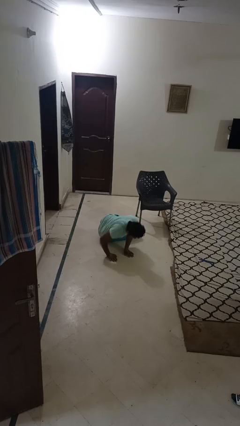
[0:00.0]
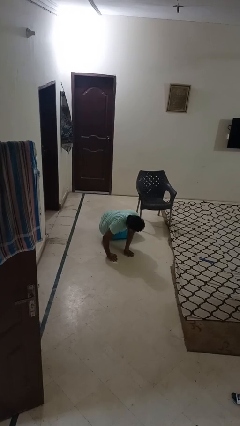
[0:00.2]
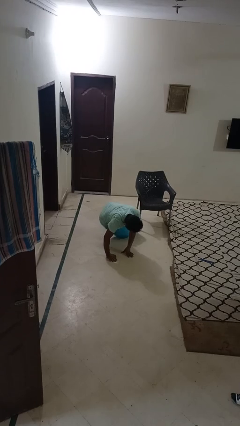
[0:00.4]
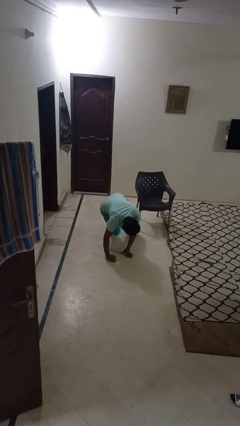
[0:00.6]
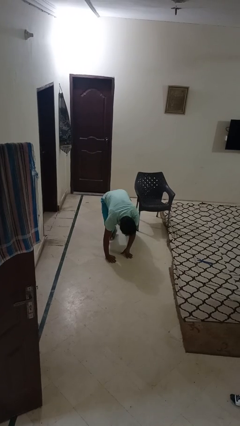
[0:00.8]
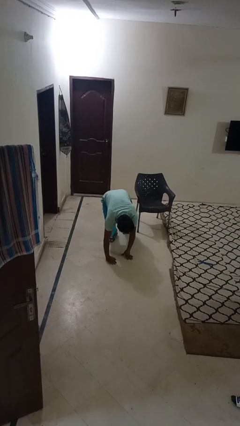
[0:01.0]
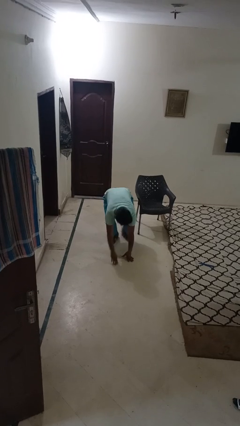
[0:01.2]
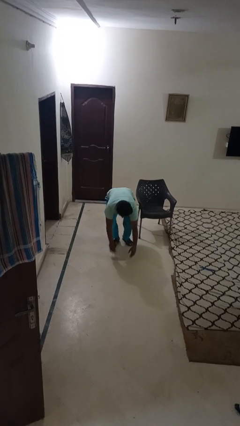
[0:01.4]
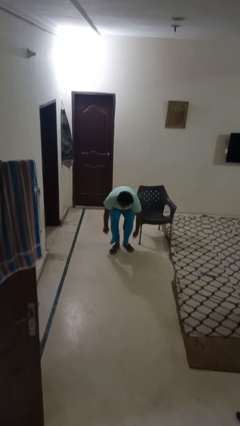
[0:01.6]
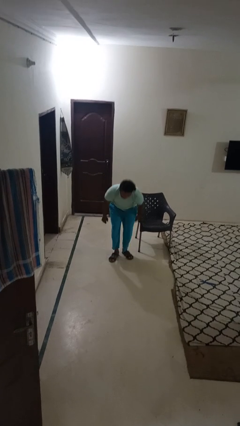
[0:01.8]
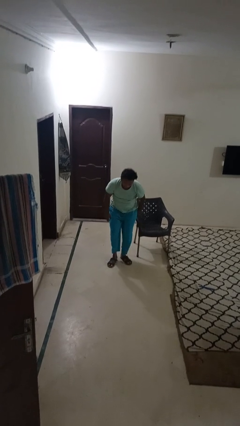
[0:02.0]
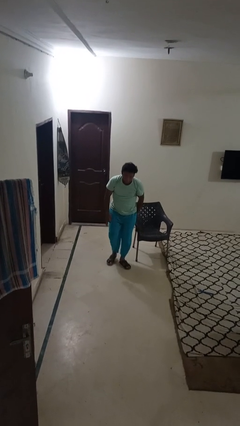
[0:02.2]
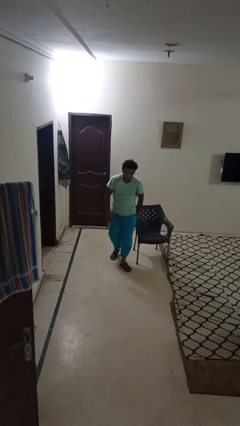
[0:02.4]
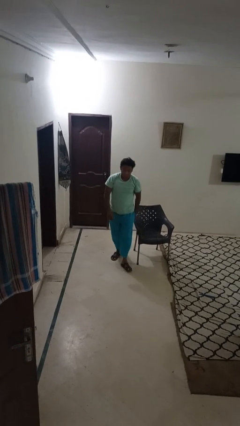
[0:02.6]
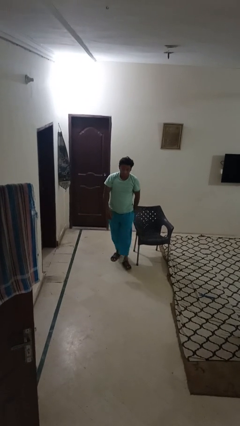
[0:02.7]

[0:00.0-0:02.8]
person stands up from floor

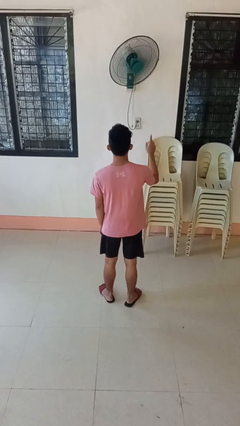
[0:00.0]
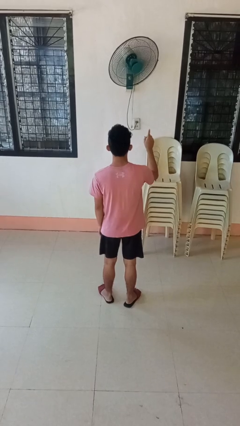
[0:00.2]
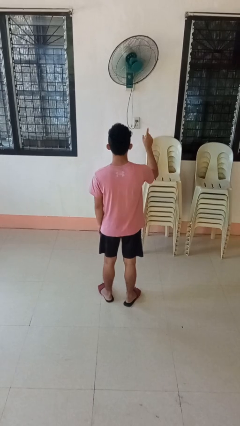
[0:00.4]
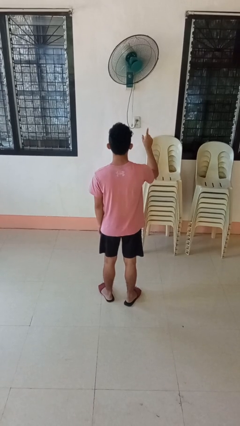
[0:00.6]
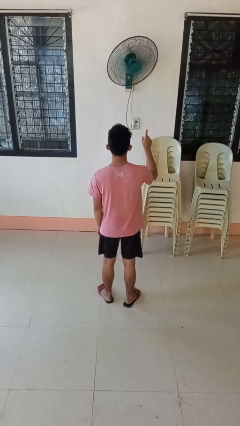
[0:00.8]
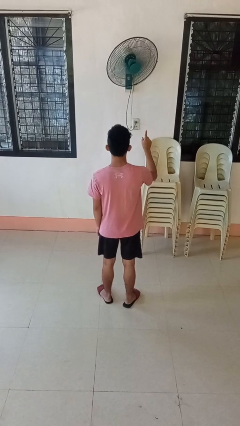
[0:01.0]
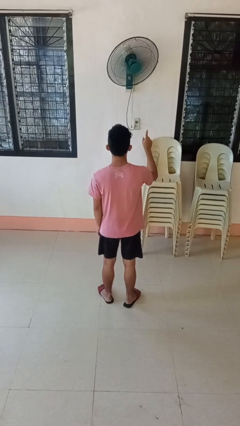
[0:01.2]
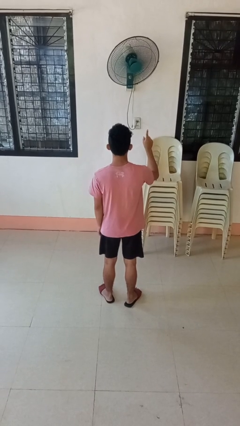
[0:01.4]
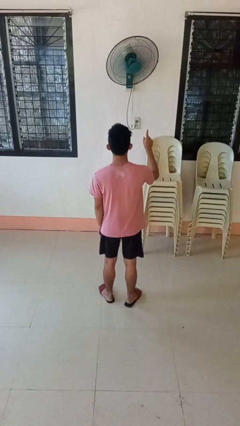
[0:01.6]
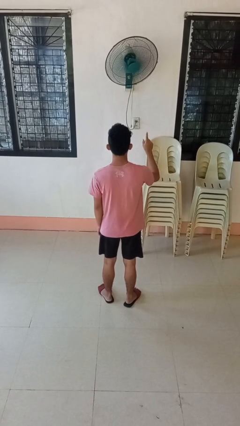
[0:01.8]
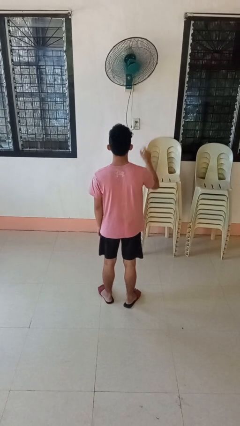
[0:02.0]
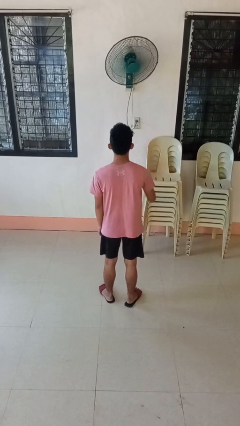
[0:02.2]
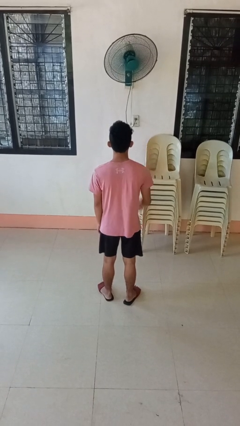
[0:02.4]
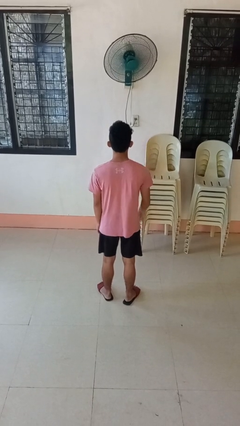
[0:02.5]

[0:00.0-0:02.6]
person gestures number one

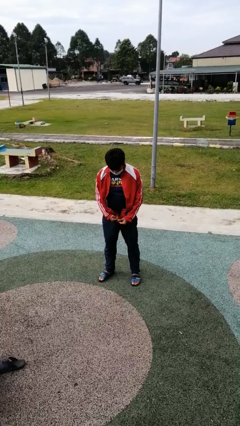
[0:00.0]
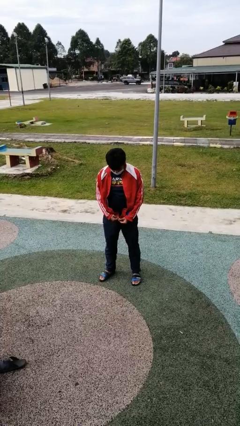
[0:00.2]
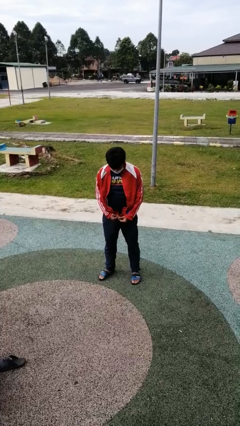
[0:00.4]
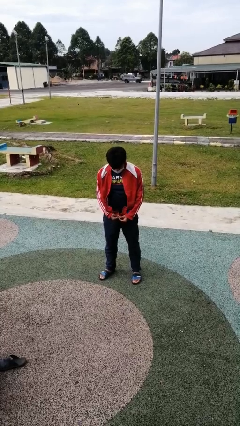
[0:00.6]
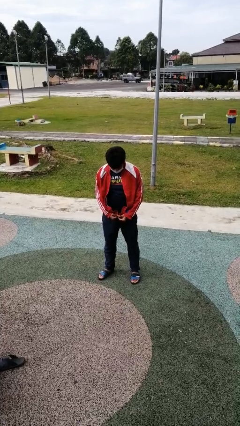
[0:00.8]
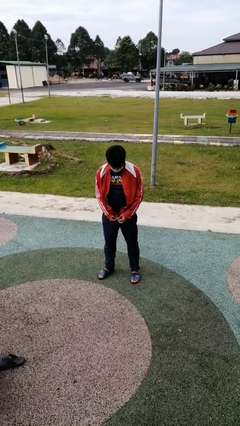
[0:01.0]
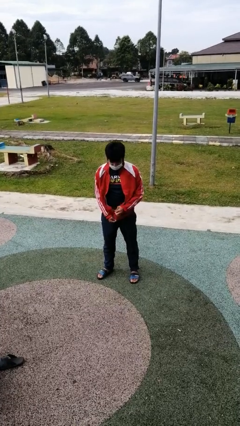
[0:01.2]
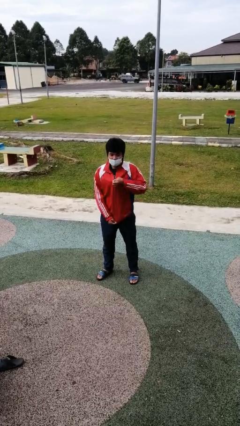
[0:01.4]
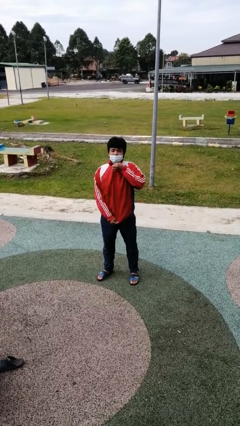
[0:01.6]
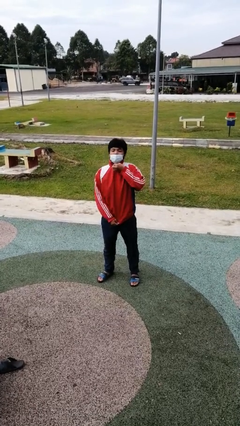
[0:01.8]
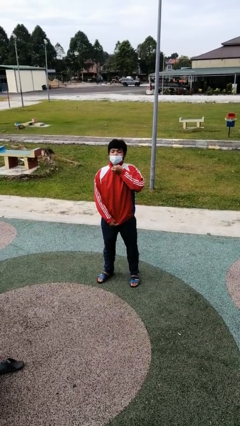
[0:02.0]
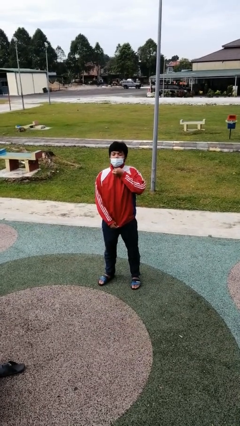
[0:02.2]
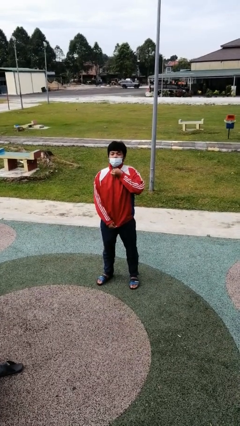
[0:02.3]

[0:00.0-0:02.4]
person zips up jacket

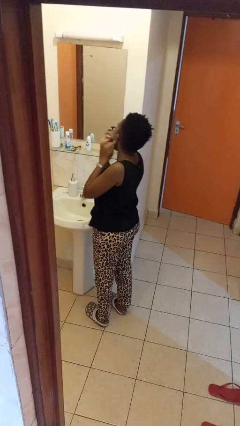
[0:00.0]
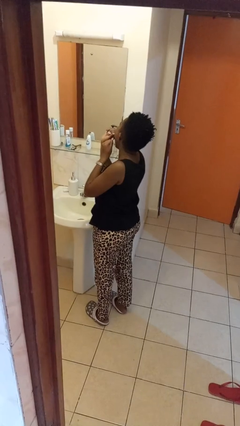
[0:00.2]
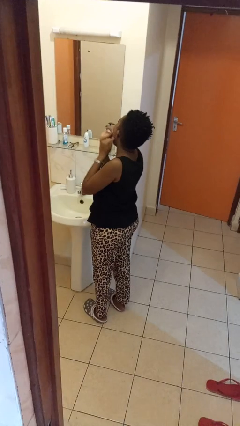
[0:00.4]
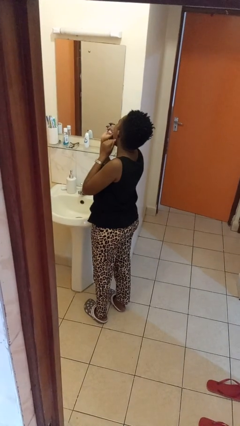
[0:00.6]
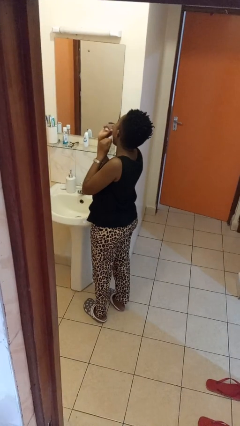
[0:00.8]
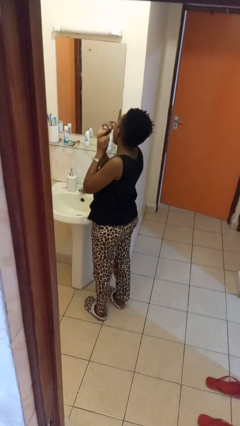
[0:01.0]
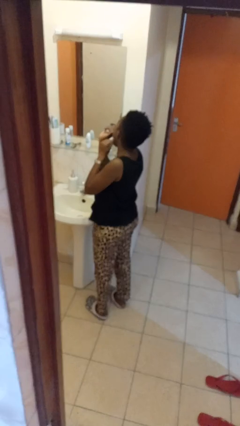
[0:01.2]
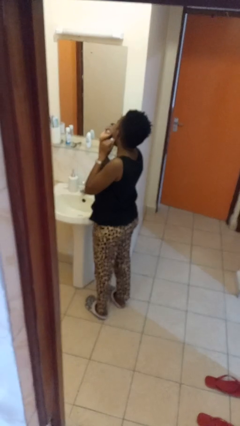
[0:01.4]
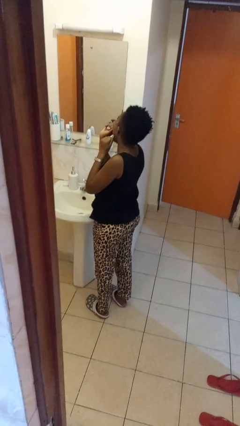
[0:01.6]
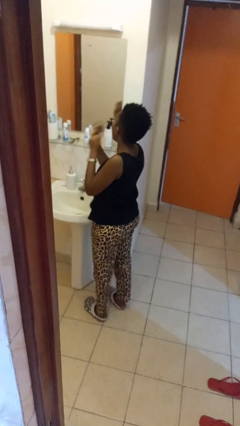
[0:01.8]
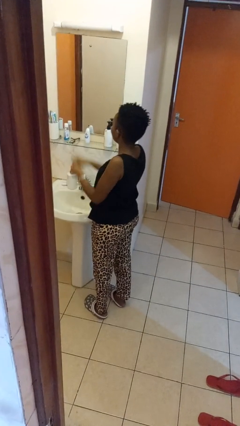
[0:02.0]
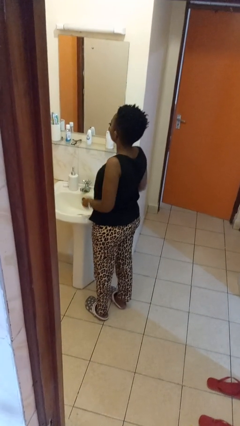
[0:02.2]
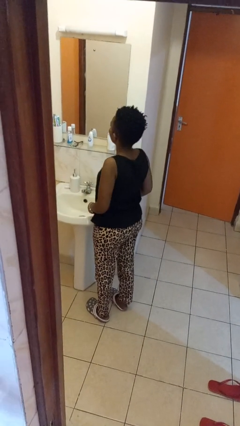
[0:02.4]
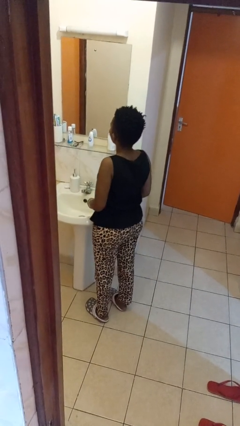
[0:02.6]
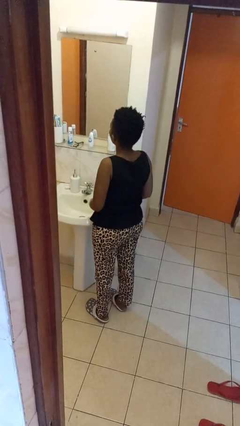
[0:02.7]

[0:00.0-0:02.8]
person flosses

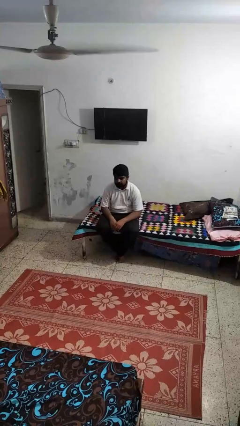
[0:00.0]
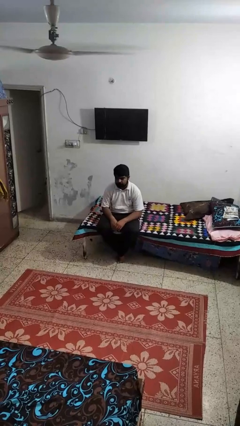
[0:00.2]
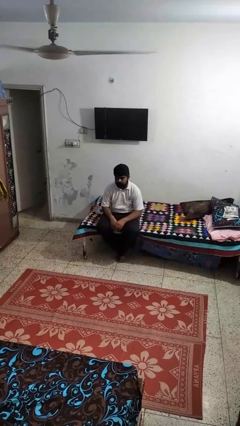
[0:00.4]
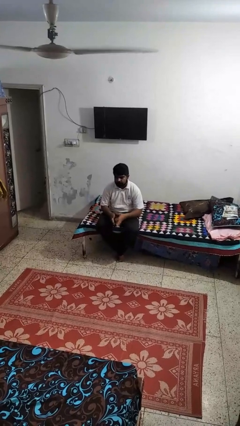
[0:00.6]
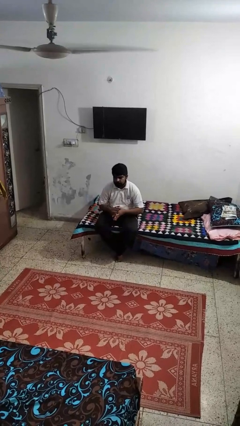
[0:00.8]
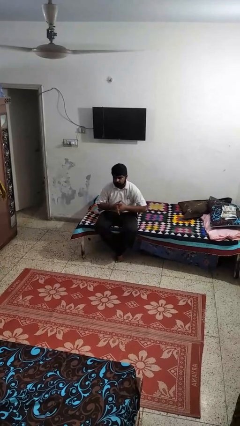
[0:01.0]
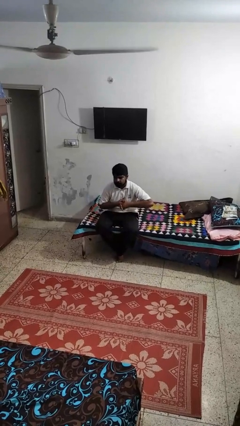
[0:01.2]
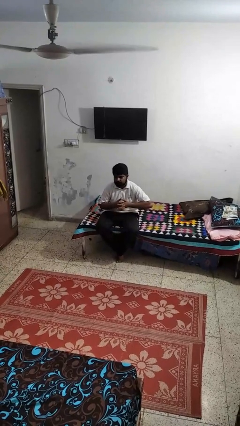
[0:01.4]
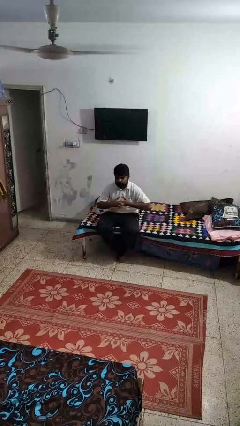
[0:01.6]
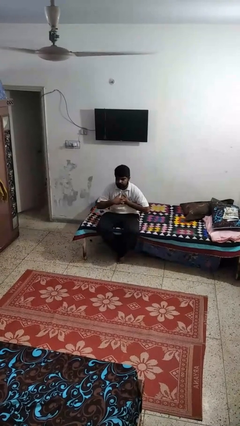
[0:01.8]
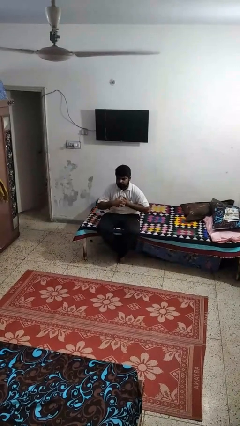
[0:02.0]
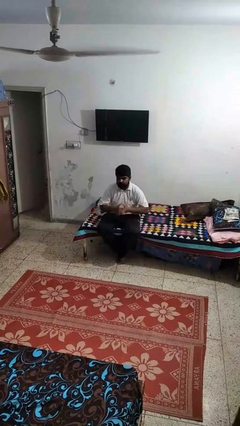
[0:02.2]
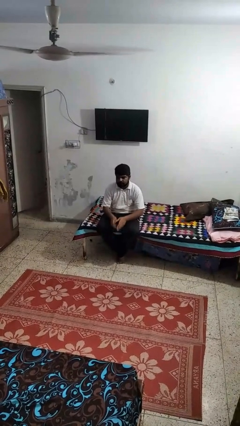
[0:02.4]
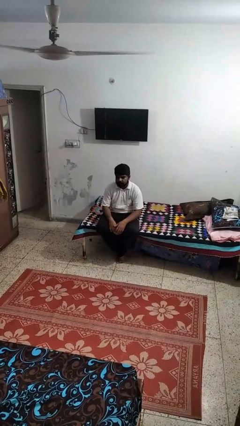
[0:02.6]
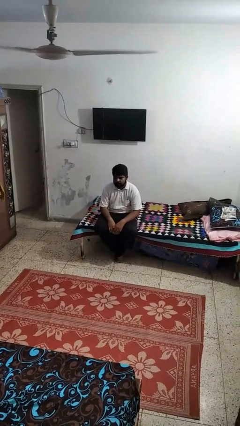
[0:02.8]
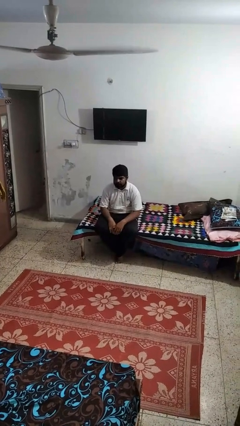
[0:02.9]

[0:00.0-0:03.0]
person cracks knuckles

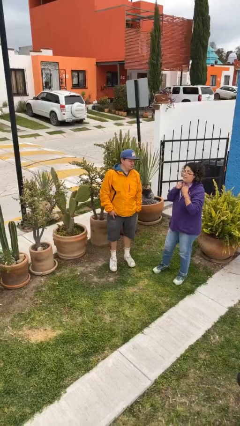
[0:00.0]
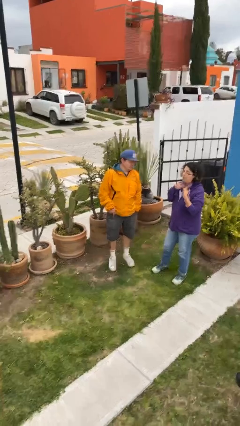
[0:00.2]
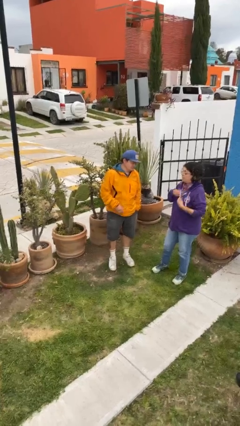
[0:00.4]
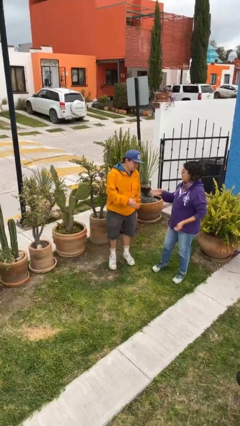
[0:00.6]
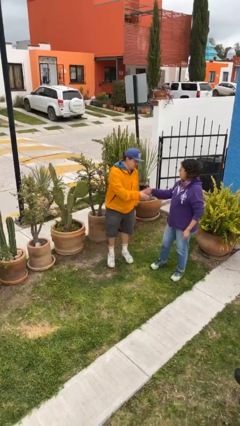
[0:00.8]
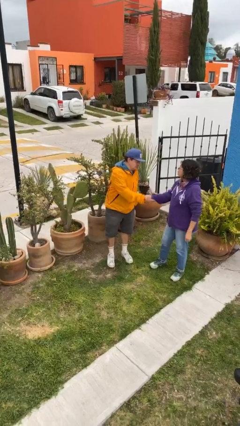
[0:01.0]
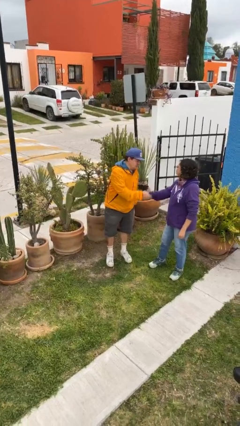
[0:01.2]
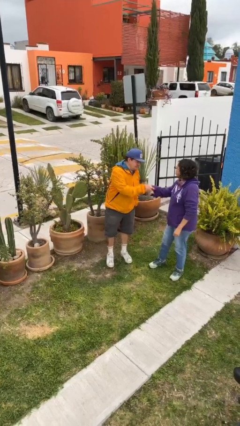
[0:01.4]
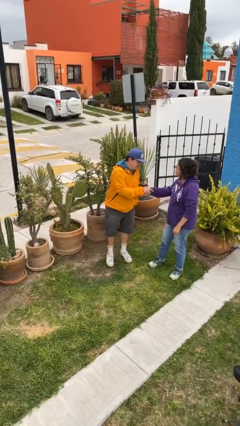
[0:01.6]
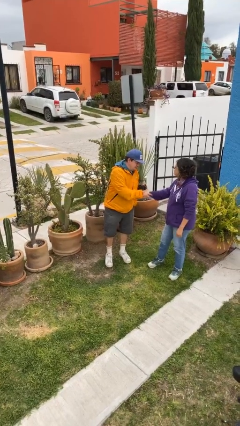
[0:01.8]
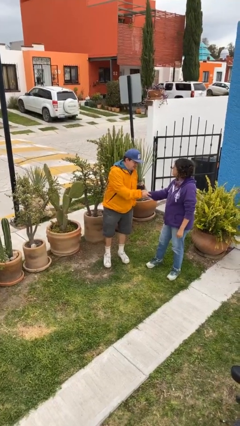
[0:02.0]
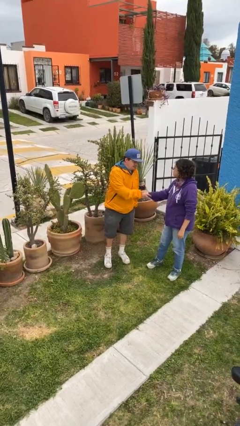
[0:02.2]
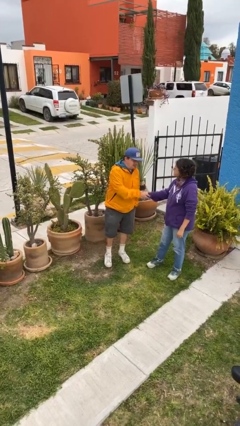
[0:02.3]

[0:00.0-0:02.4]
person shakes hand

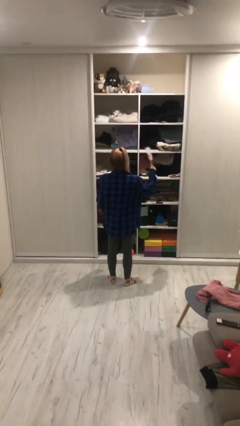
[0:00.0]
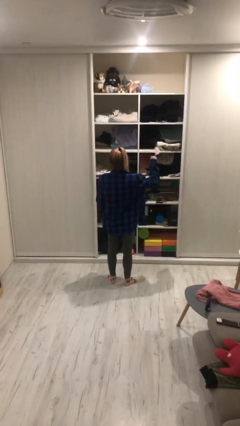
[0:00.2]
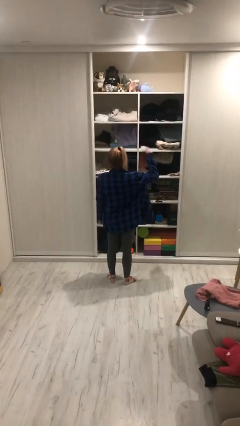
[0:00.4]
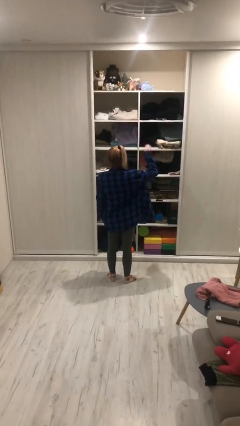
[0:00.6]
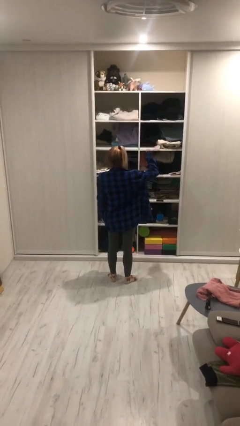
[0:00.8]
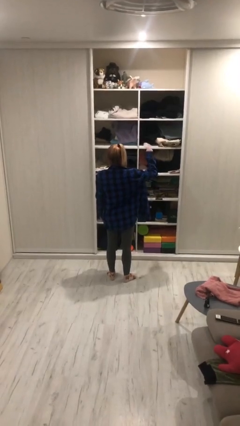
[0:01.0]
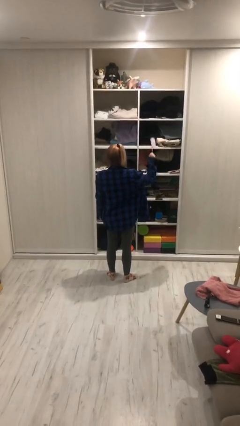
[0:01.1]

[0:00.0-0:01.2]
person dusts furniture
